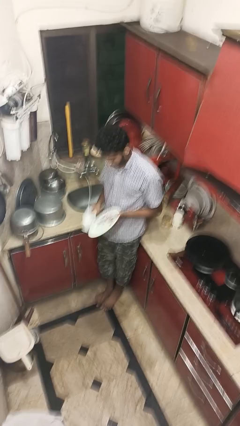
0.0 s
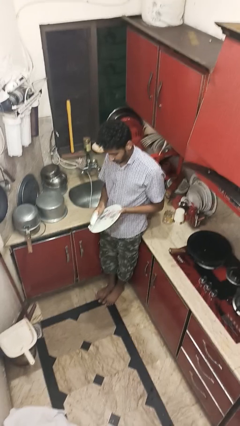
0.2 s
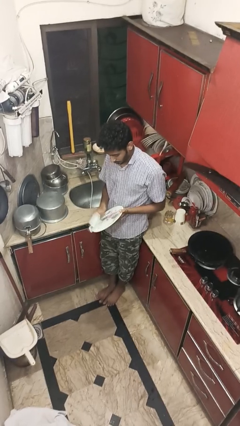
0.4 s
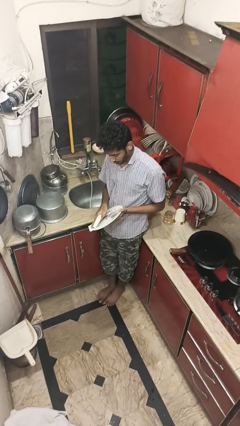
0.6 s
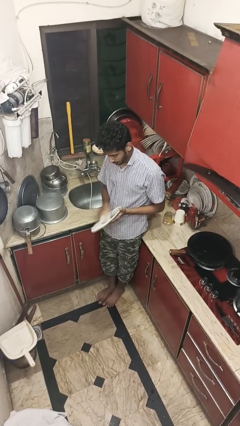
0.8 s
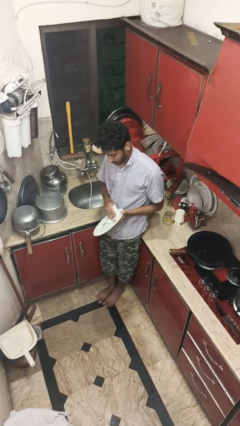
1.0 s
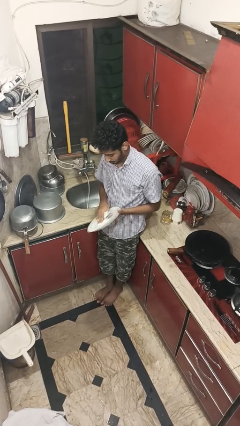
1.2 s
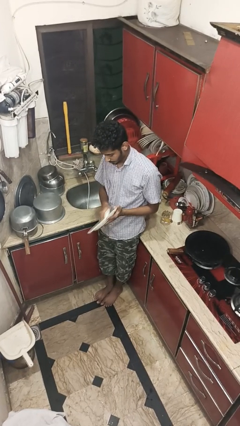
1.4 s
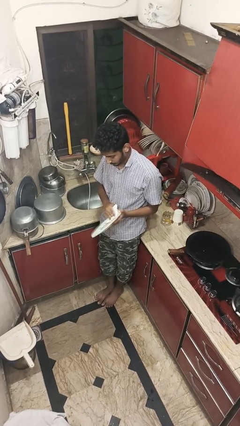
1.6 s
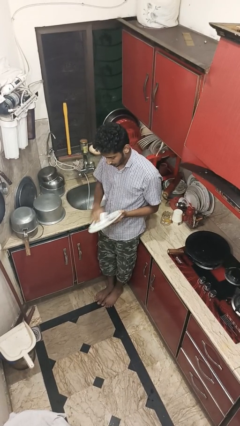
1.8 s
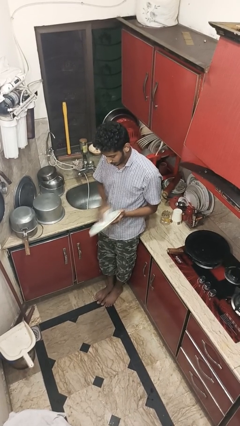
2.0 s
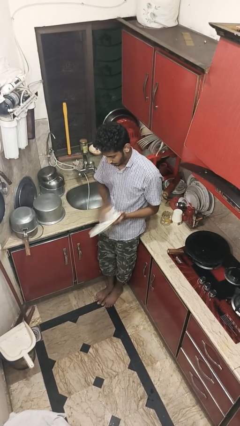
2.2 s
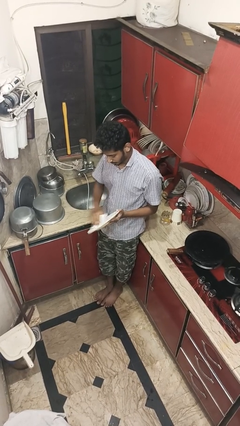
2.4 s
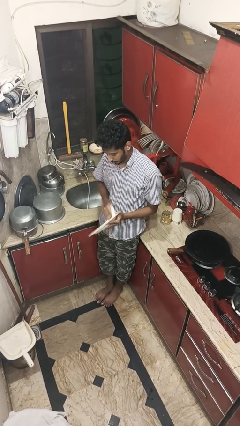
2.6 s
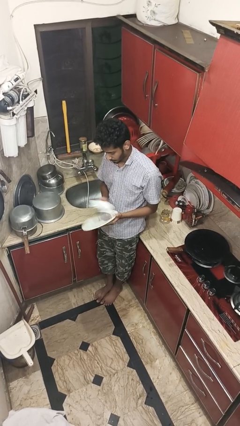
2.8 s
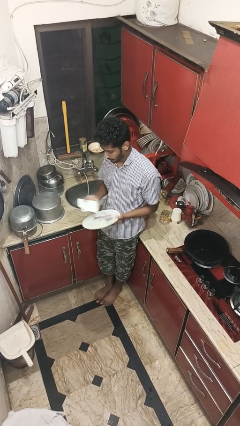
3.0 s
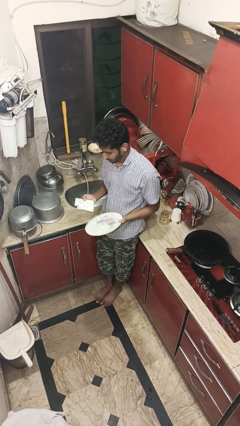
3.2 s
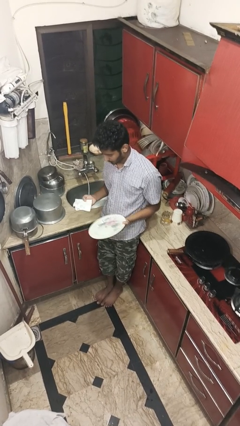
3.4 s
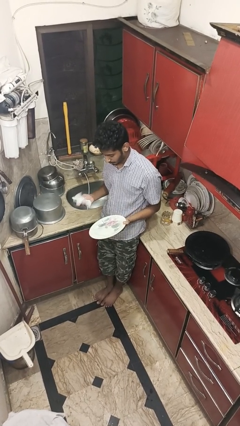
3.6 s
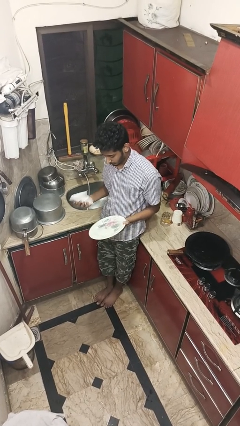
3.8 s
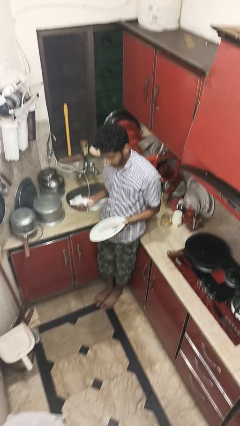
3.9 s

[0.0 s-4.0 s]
person dries dish

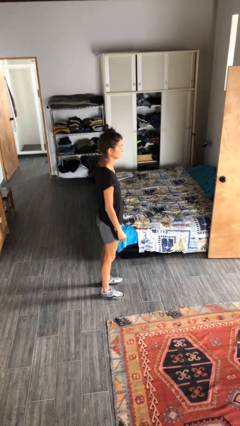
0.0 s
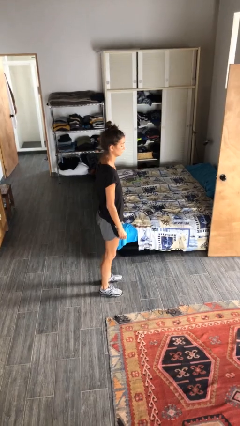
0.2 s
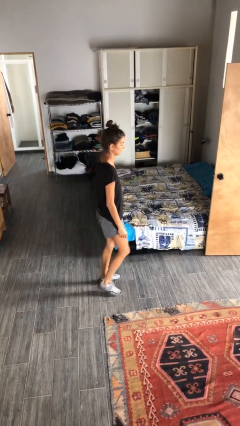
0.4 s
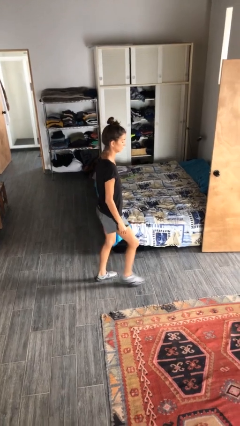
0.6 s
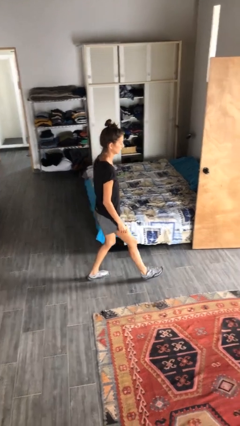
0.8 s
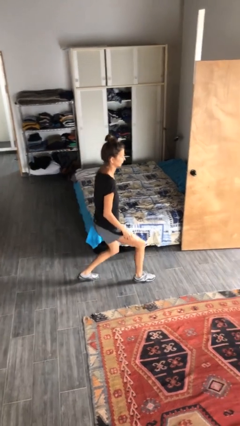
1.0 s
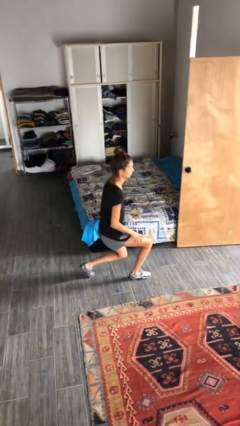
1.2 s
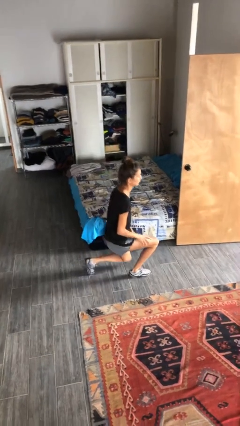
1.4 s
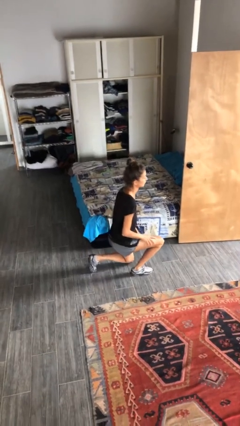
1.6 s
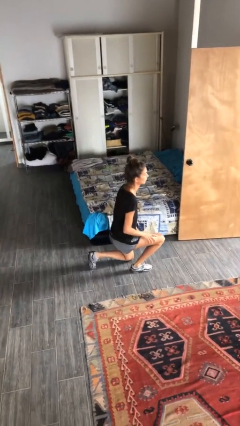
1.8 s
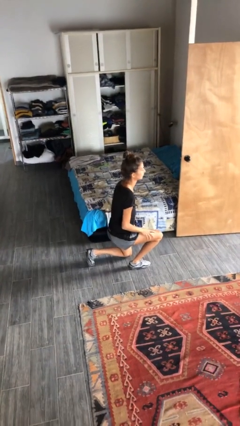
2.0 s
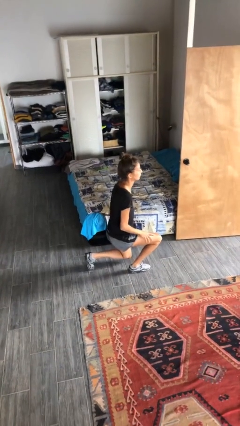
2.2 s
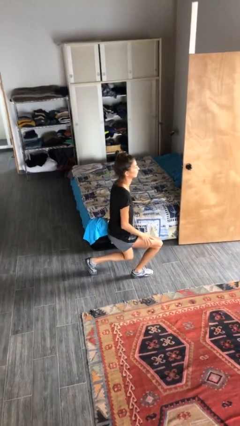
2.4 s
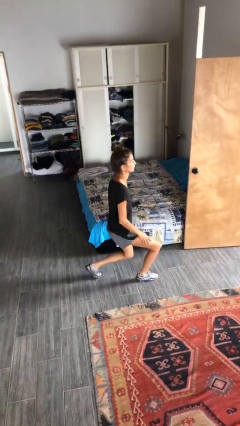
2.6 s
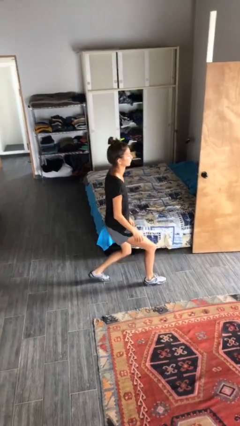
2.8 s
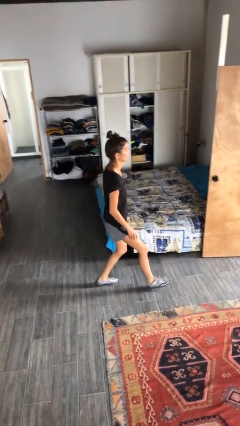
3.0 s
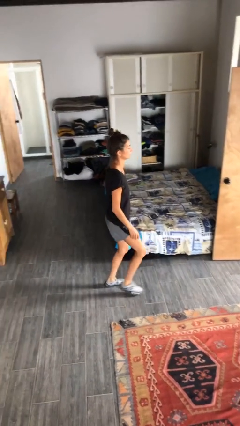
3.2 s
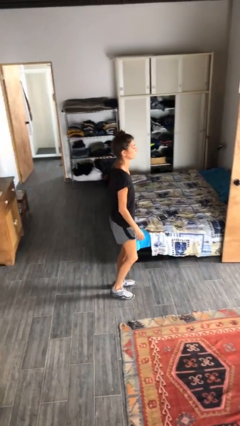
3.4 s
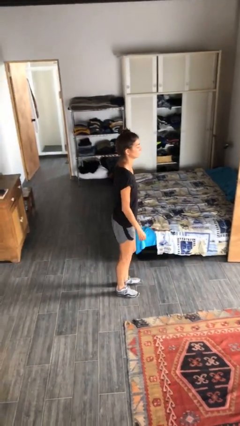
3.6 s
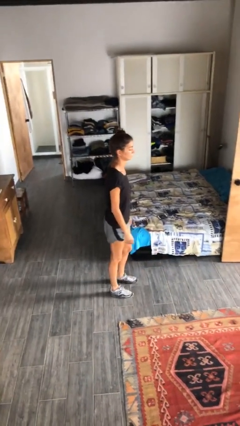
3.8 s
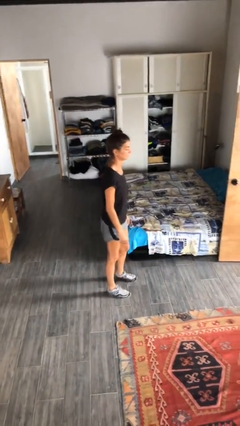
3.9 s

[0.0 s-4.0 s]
person exercises with lunges

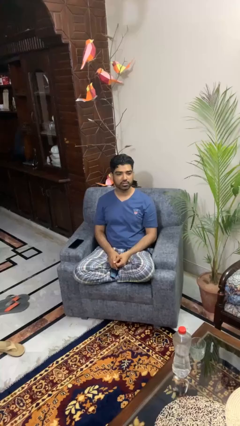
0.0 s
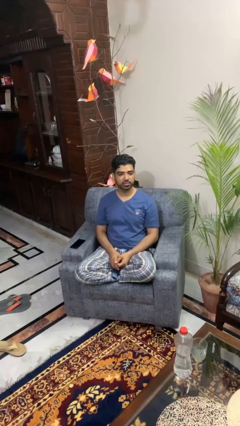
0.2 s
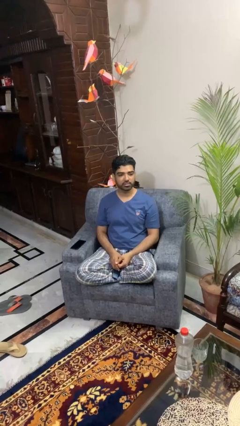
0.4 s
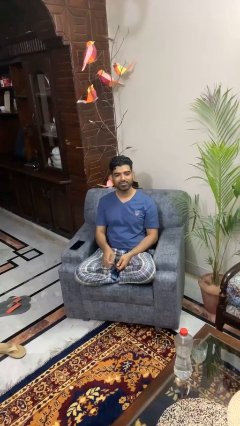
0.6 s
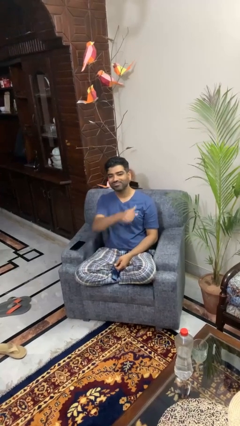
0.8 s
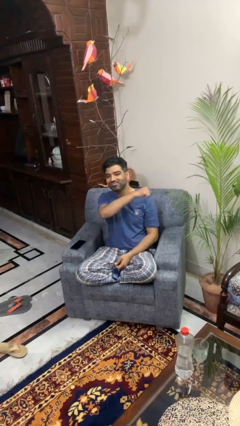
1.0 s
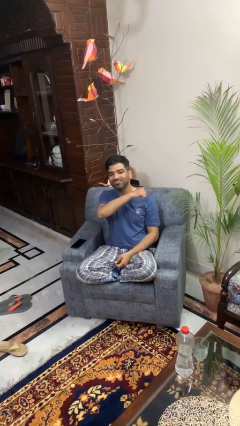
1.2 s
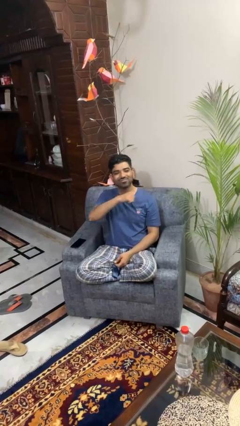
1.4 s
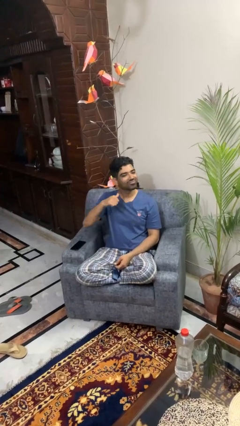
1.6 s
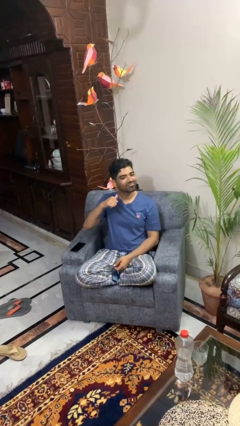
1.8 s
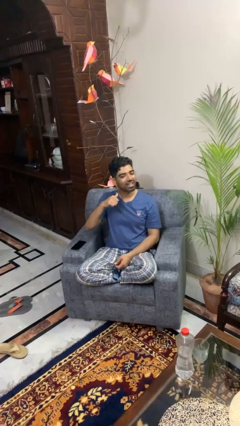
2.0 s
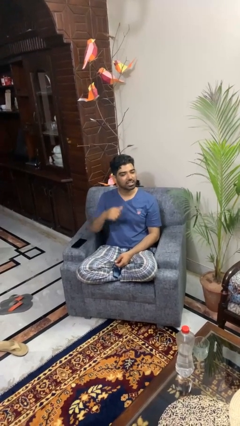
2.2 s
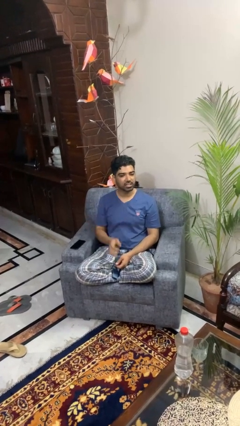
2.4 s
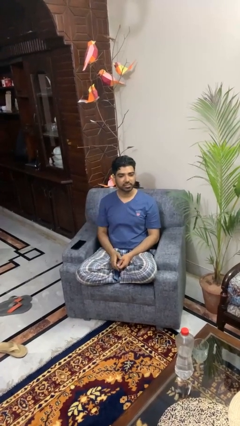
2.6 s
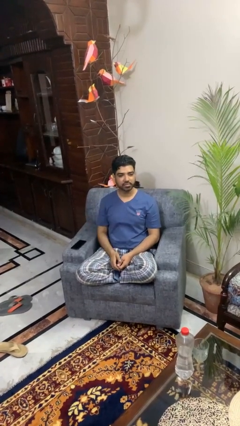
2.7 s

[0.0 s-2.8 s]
person gestures cut

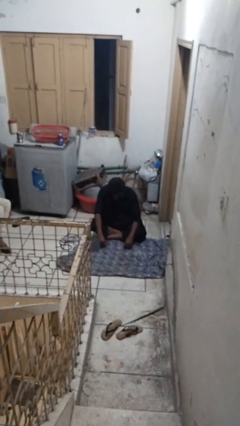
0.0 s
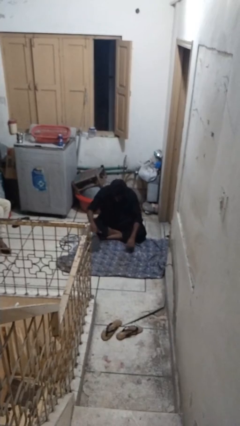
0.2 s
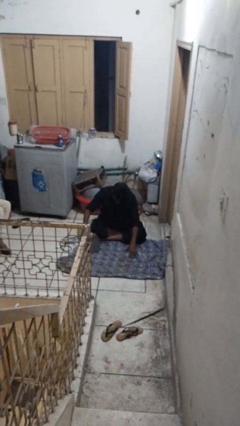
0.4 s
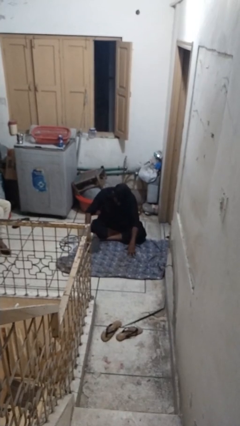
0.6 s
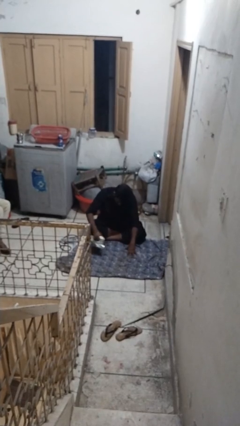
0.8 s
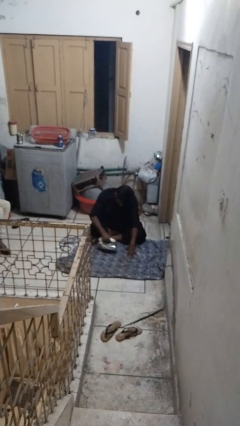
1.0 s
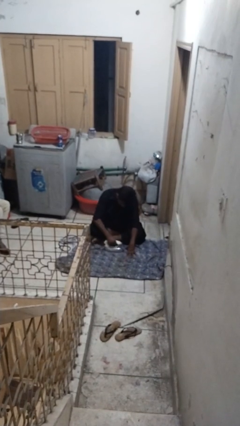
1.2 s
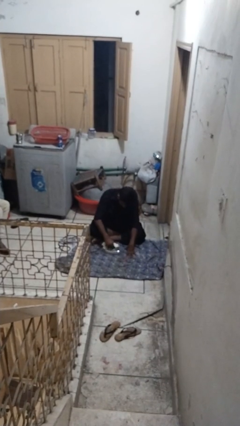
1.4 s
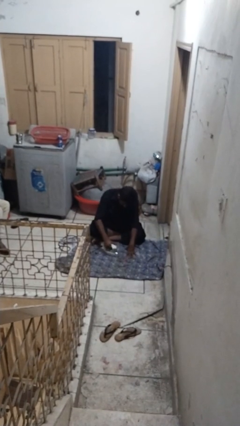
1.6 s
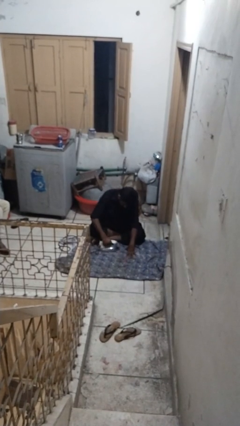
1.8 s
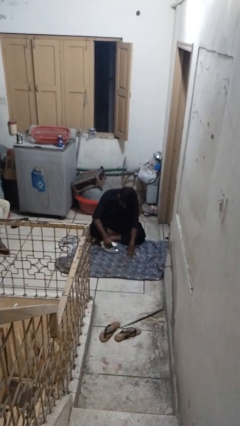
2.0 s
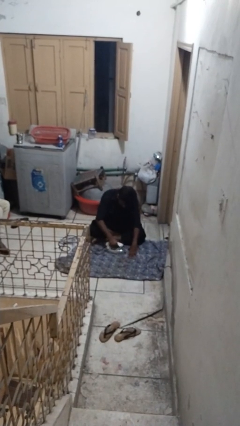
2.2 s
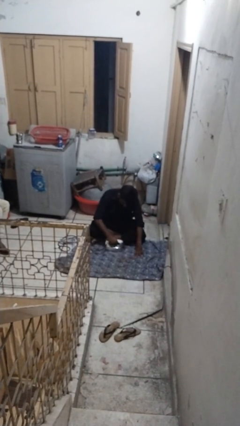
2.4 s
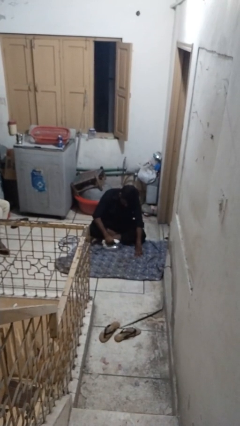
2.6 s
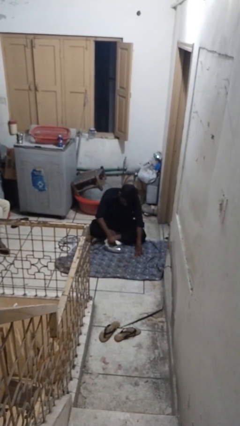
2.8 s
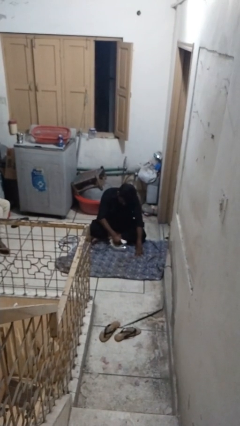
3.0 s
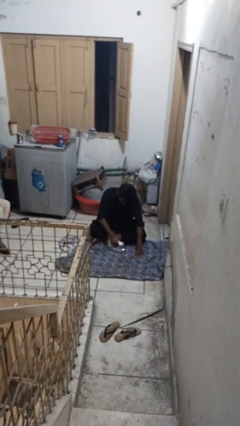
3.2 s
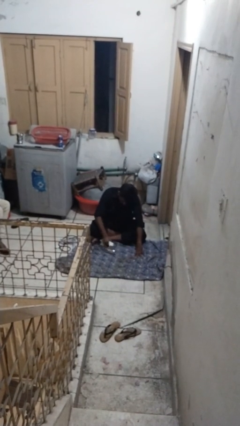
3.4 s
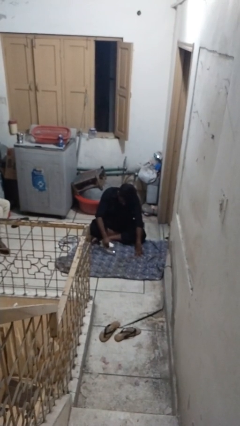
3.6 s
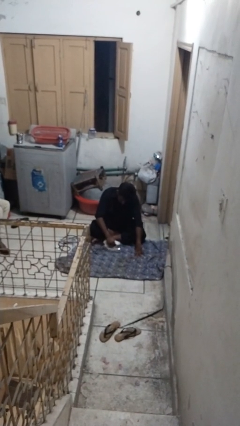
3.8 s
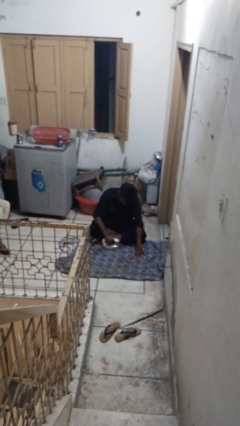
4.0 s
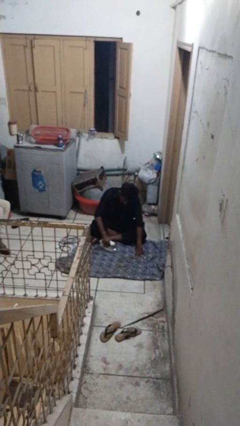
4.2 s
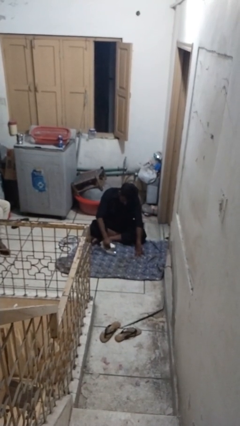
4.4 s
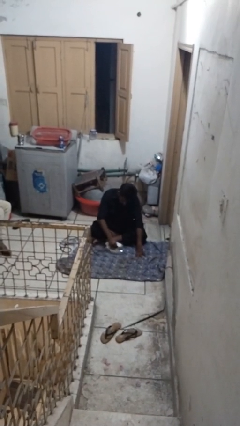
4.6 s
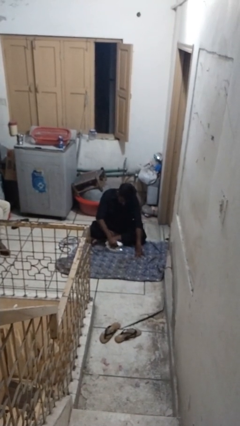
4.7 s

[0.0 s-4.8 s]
person irons clothes

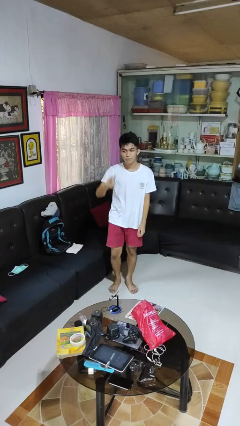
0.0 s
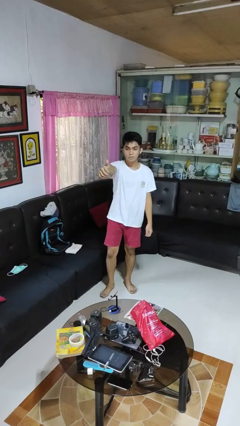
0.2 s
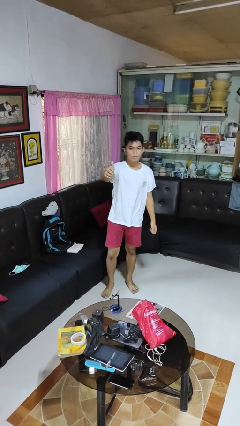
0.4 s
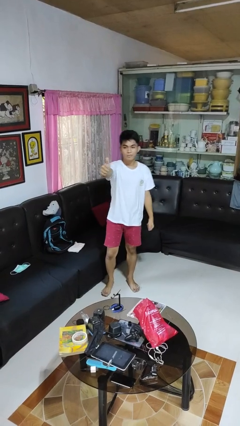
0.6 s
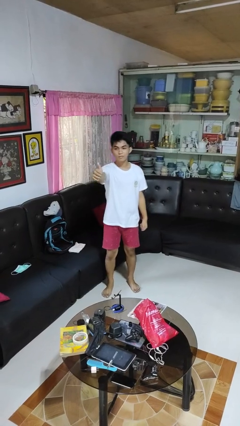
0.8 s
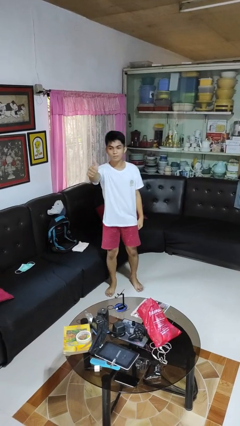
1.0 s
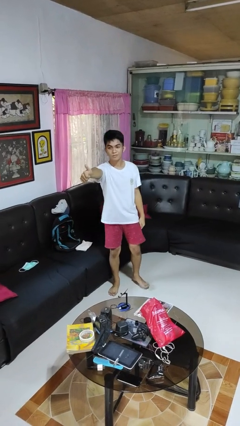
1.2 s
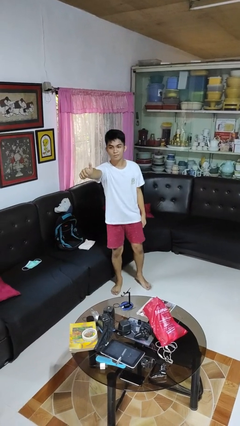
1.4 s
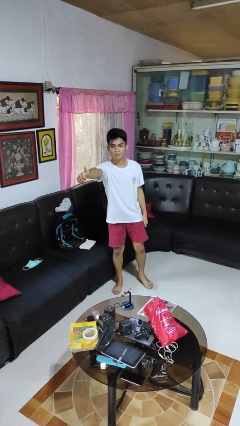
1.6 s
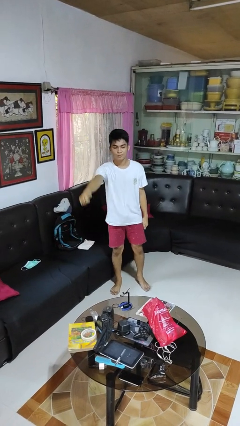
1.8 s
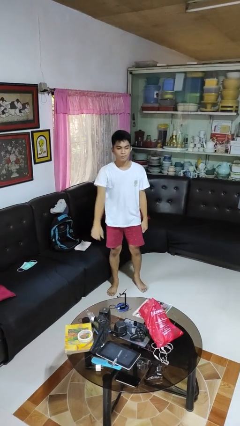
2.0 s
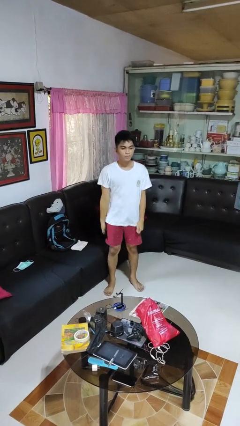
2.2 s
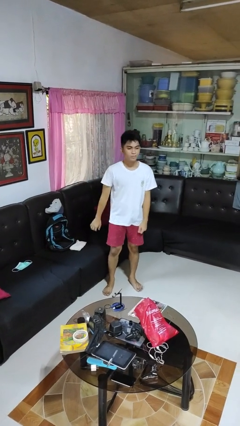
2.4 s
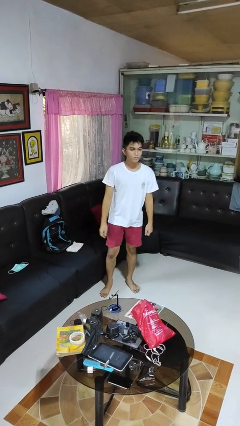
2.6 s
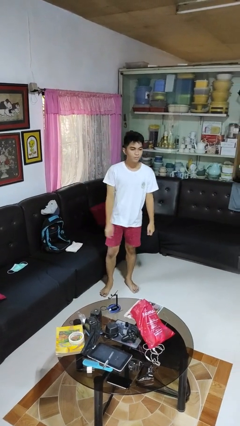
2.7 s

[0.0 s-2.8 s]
person gestures thumbs up
